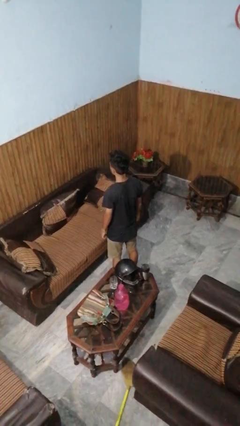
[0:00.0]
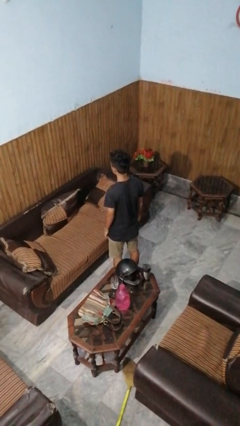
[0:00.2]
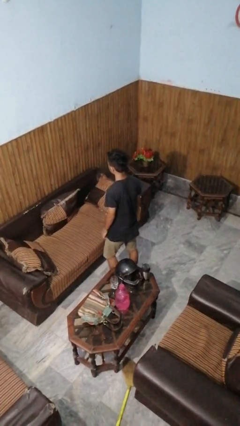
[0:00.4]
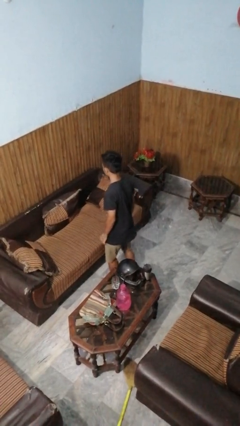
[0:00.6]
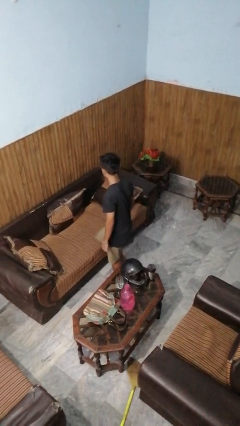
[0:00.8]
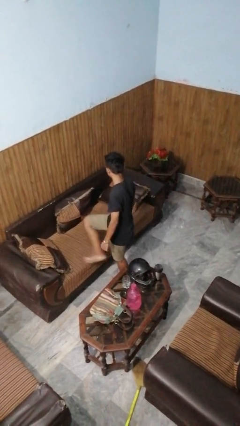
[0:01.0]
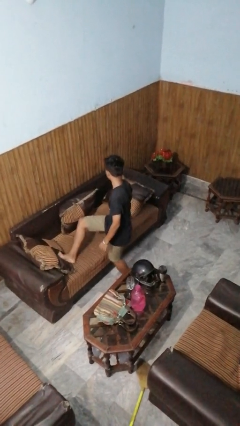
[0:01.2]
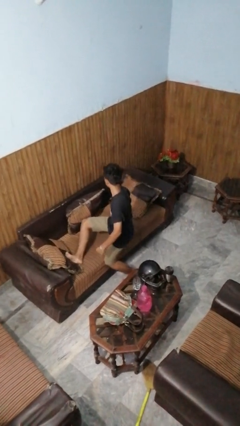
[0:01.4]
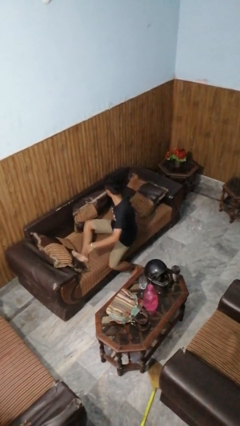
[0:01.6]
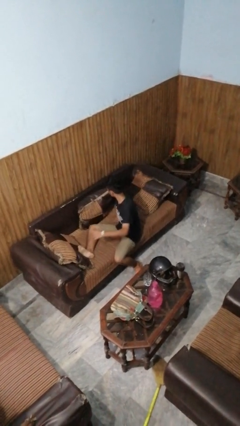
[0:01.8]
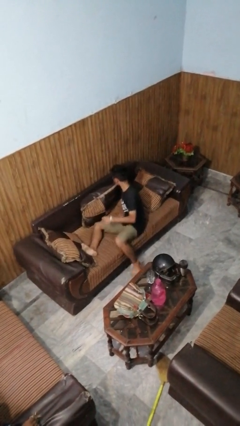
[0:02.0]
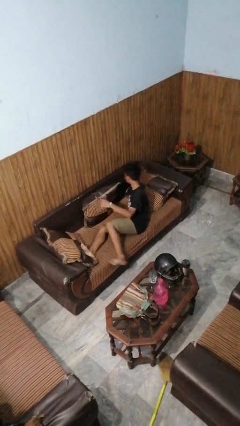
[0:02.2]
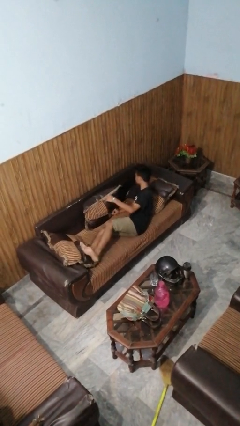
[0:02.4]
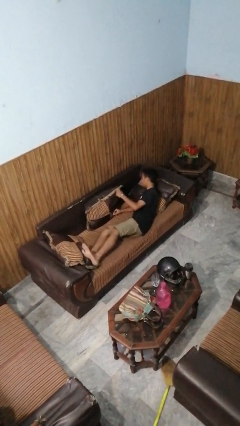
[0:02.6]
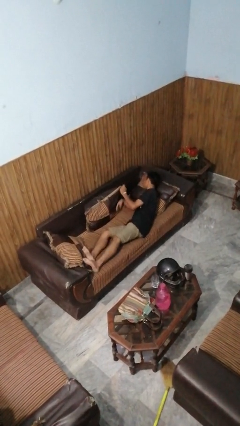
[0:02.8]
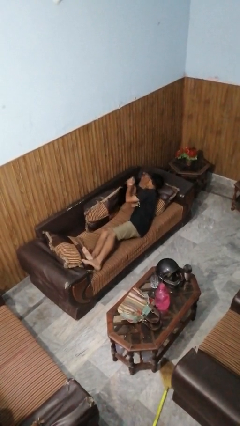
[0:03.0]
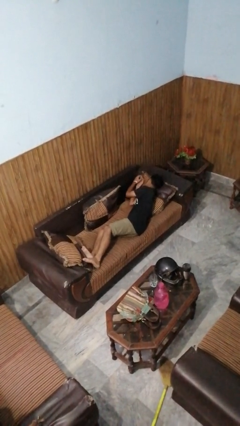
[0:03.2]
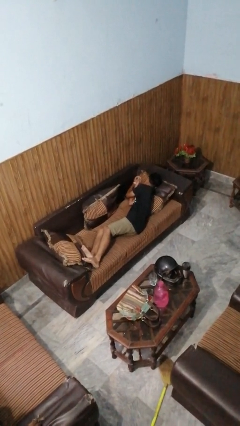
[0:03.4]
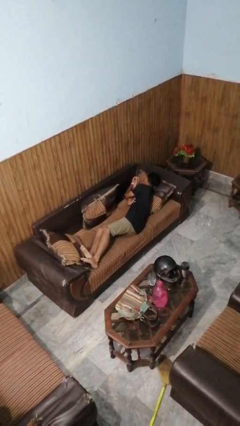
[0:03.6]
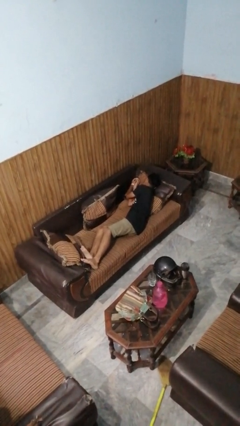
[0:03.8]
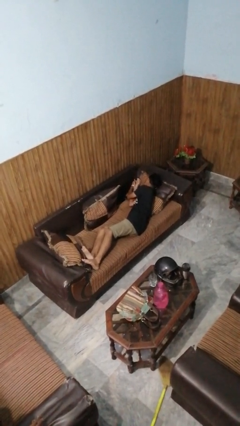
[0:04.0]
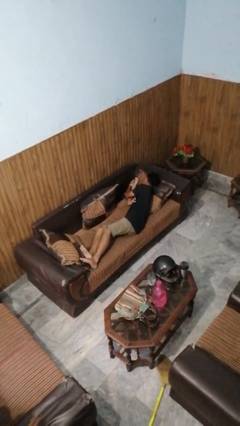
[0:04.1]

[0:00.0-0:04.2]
person lies down on couch

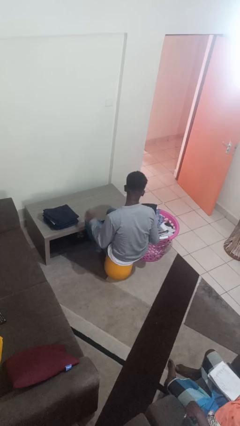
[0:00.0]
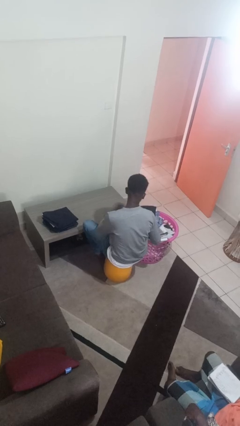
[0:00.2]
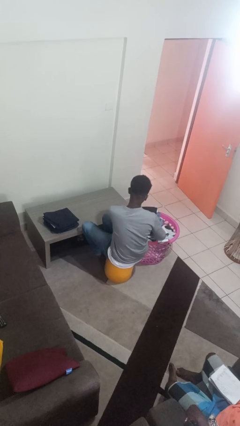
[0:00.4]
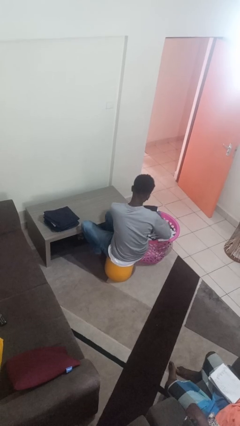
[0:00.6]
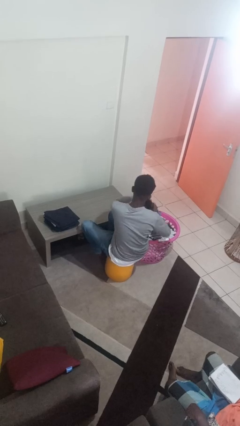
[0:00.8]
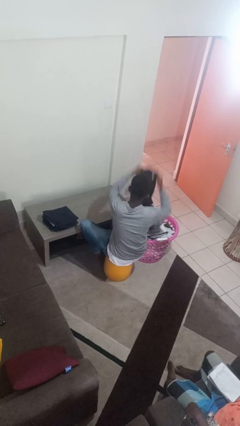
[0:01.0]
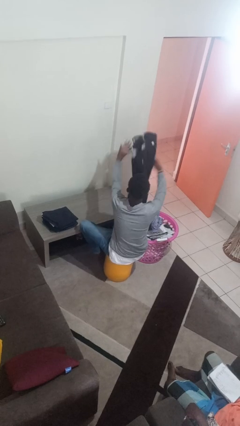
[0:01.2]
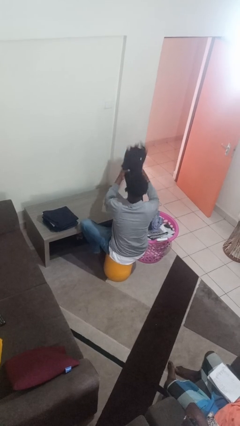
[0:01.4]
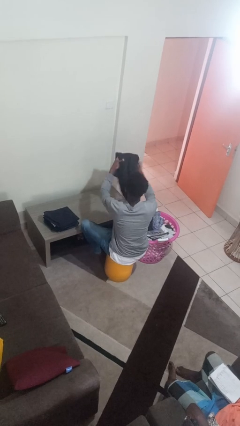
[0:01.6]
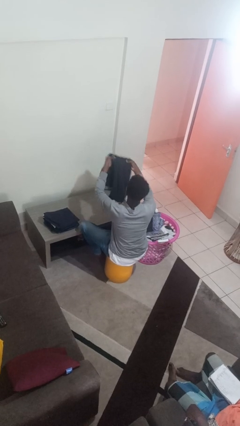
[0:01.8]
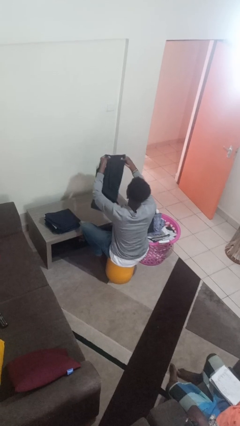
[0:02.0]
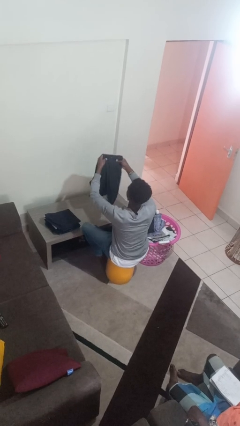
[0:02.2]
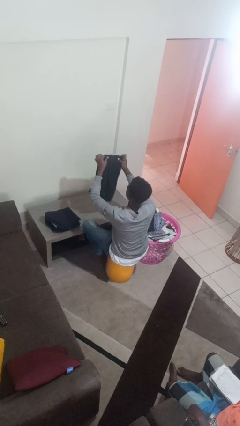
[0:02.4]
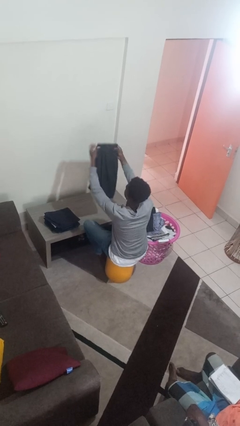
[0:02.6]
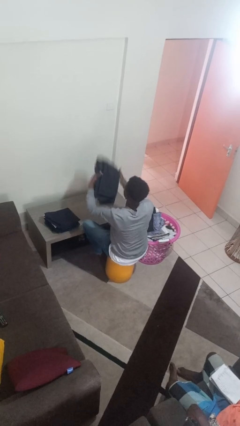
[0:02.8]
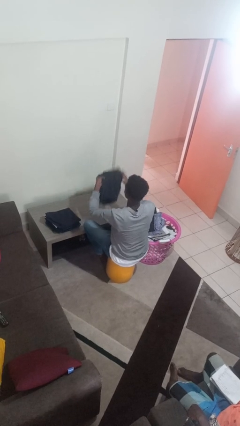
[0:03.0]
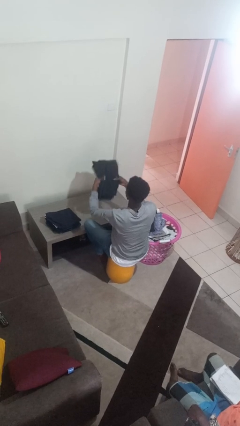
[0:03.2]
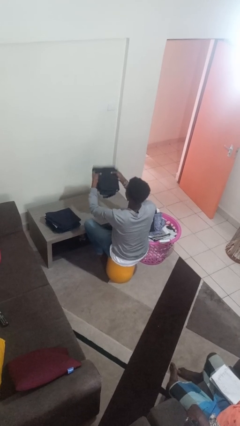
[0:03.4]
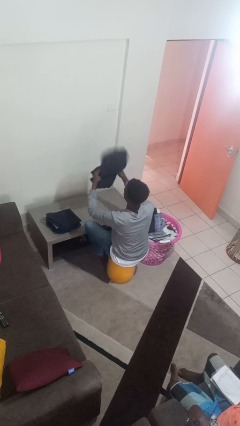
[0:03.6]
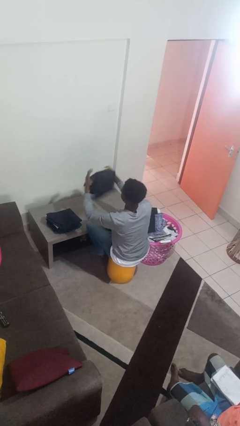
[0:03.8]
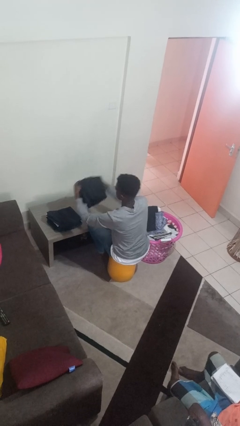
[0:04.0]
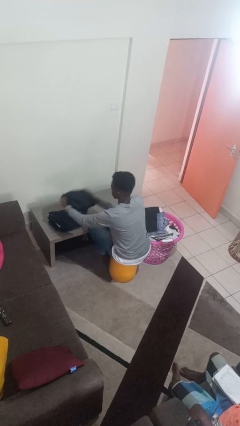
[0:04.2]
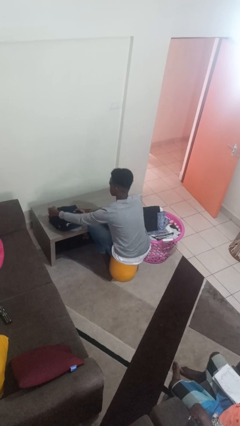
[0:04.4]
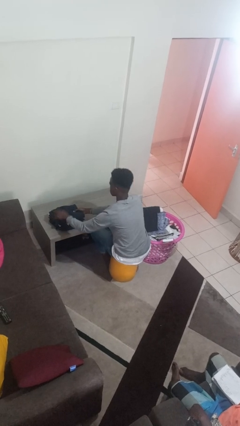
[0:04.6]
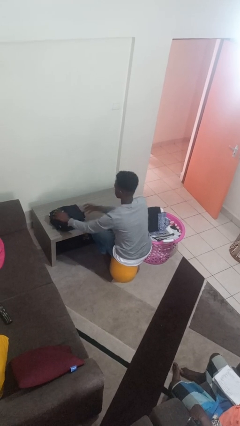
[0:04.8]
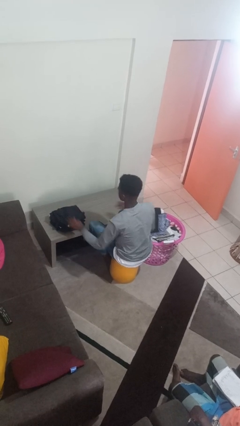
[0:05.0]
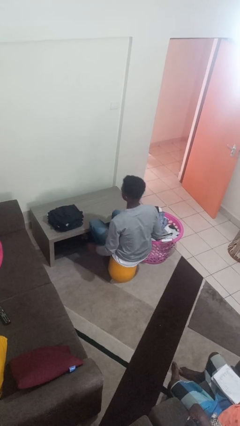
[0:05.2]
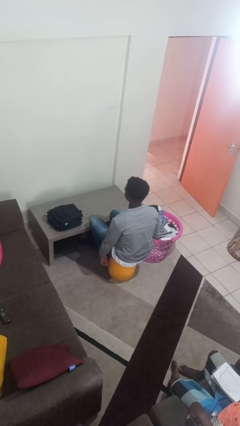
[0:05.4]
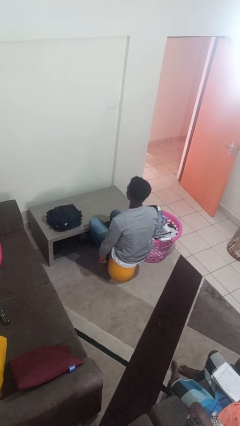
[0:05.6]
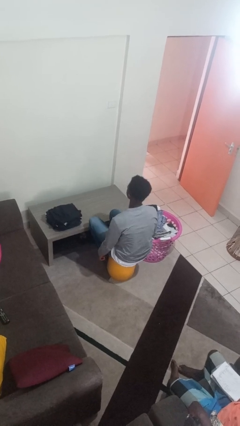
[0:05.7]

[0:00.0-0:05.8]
person folds pants

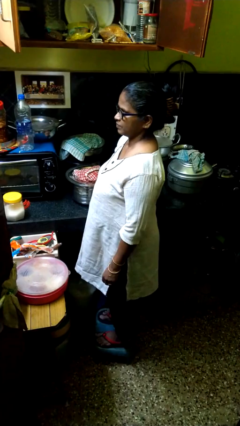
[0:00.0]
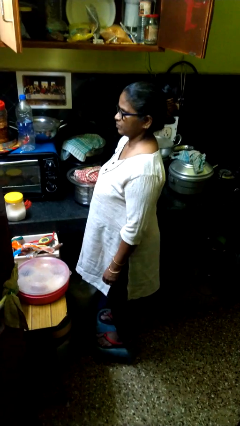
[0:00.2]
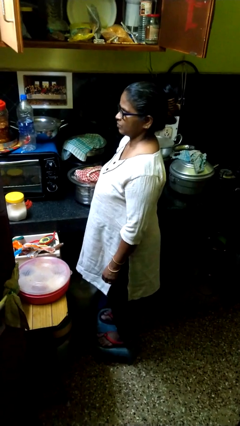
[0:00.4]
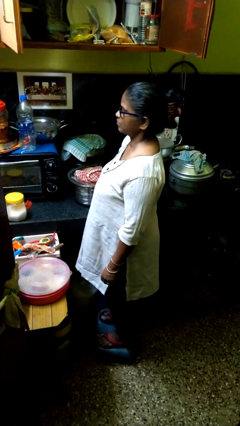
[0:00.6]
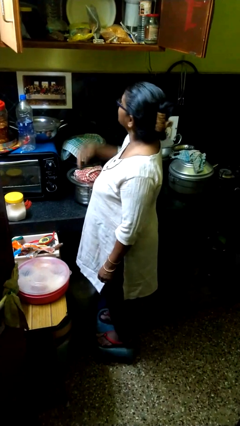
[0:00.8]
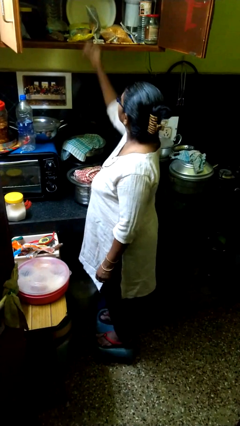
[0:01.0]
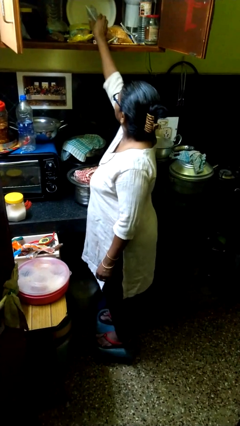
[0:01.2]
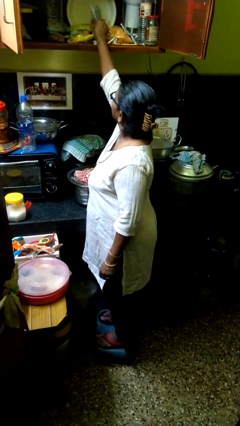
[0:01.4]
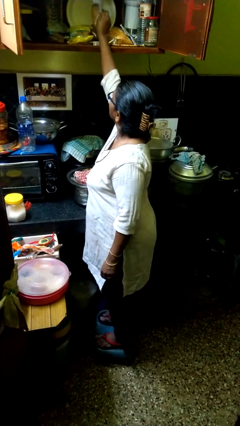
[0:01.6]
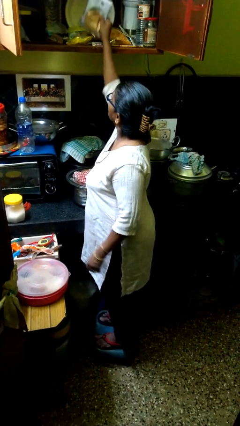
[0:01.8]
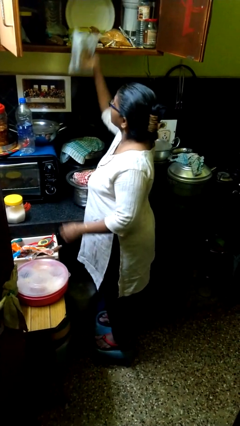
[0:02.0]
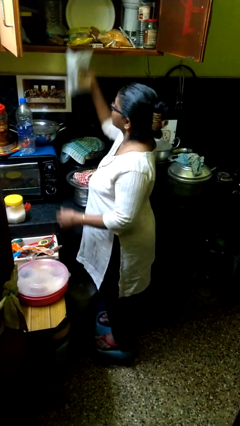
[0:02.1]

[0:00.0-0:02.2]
person takes object from cabinet

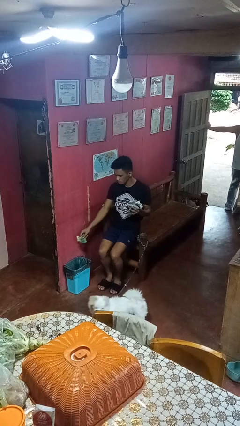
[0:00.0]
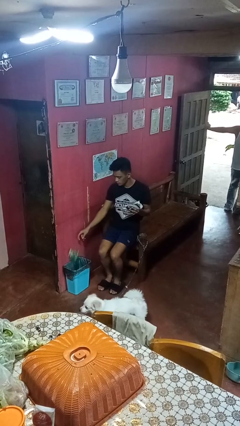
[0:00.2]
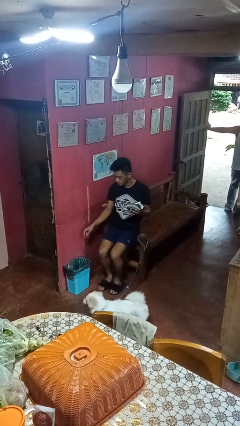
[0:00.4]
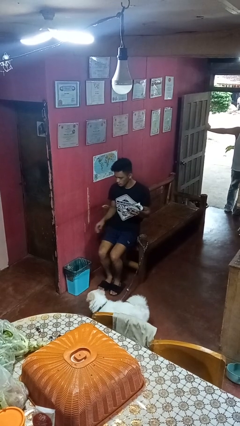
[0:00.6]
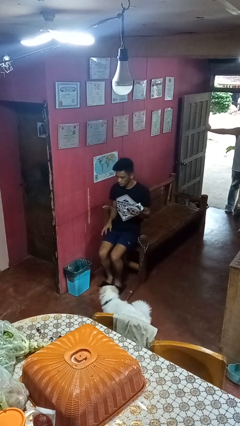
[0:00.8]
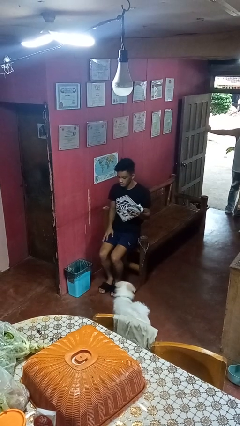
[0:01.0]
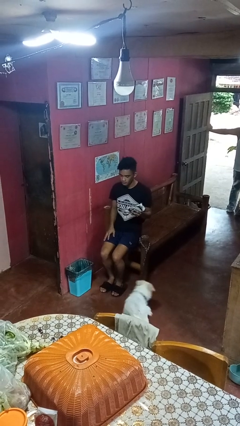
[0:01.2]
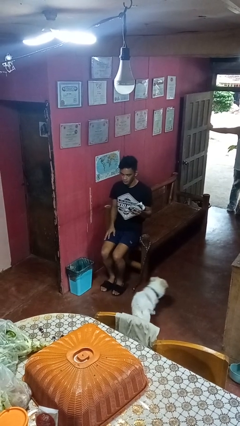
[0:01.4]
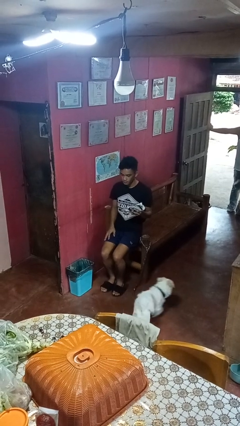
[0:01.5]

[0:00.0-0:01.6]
person discards trash

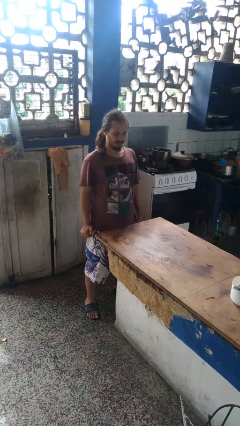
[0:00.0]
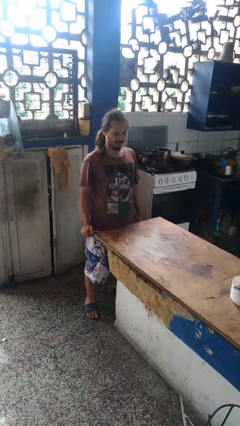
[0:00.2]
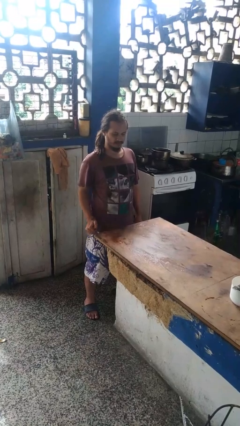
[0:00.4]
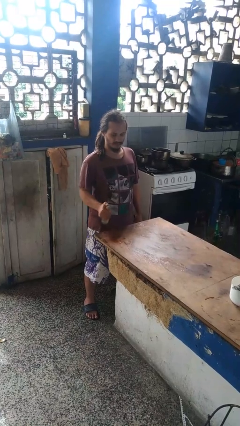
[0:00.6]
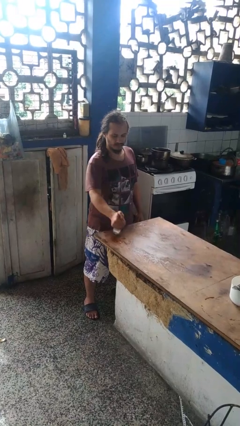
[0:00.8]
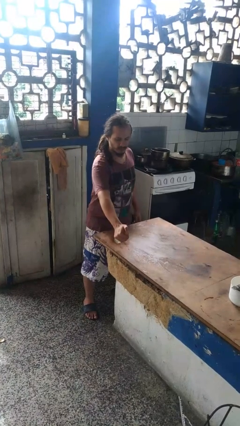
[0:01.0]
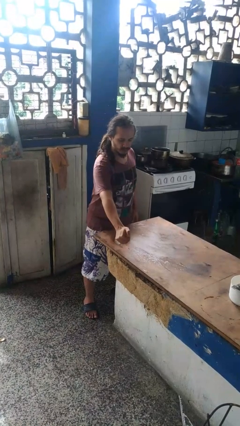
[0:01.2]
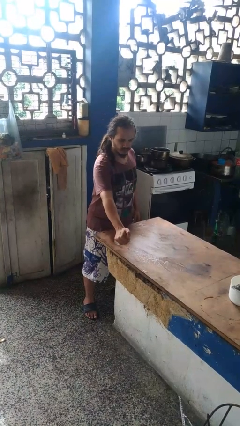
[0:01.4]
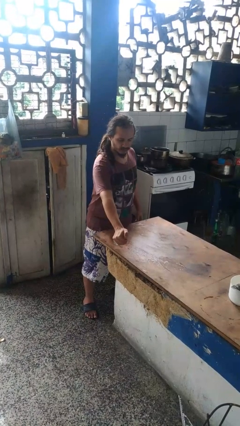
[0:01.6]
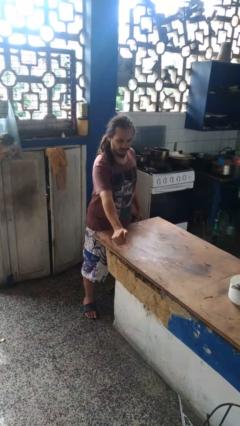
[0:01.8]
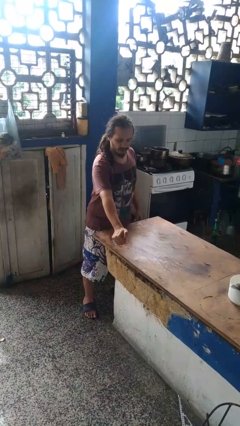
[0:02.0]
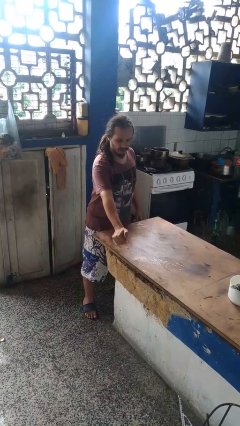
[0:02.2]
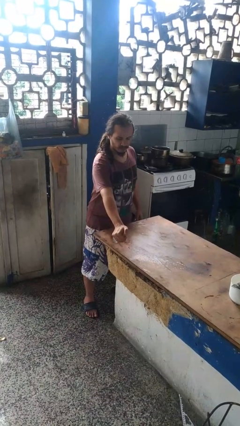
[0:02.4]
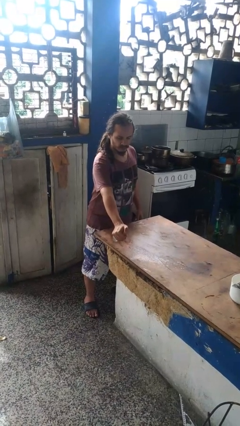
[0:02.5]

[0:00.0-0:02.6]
person sprays from bottle

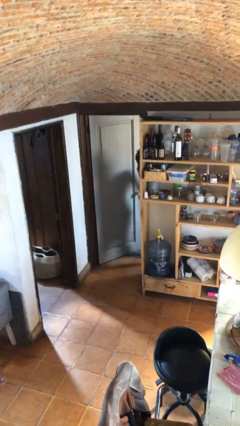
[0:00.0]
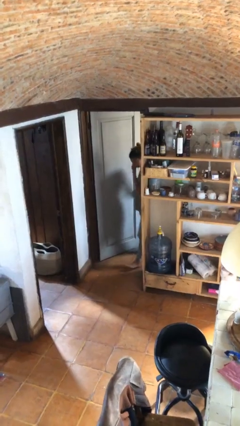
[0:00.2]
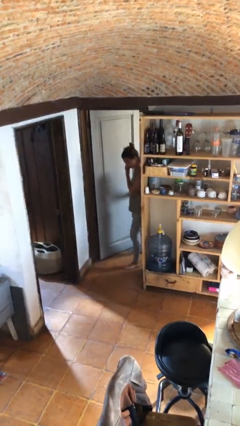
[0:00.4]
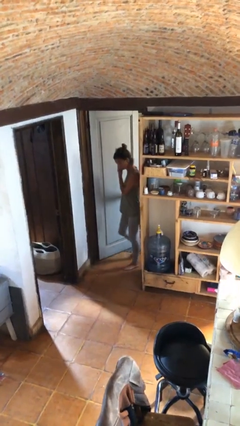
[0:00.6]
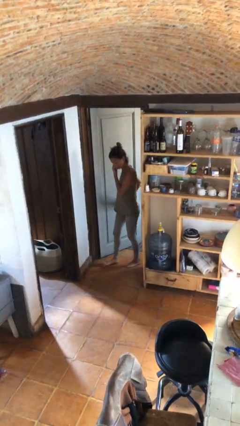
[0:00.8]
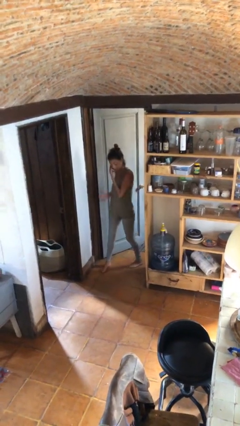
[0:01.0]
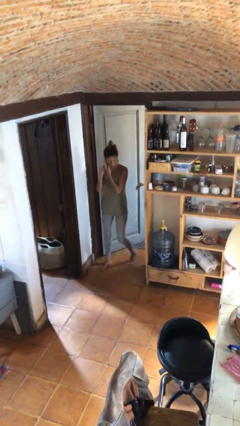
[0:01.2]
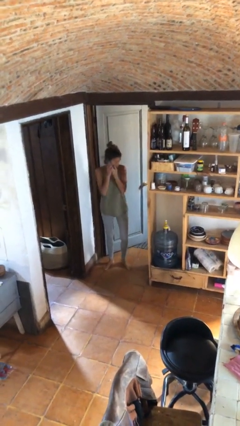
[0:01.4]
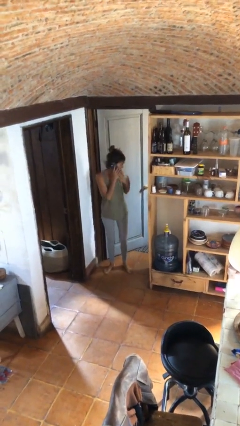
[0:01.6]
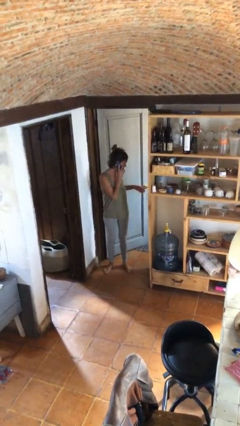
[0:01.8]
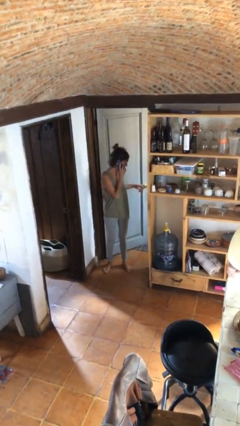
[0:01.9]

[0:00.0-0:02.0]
person enters scene through structure
